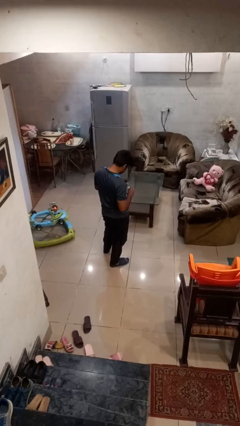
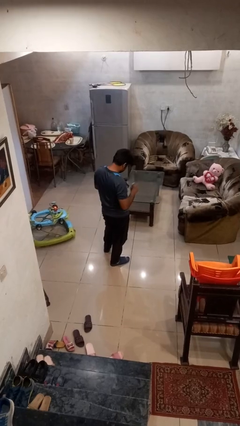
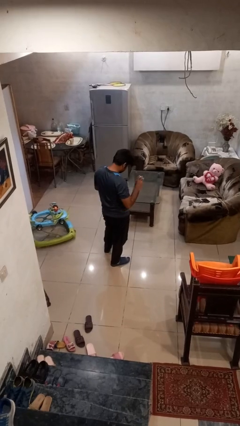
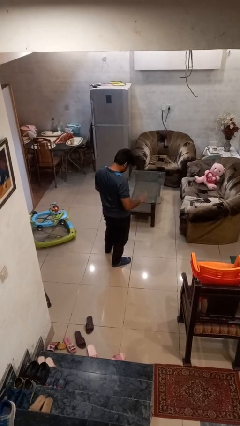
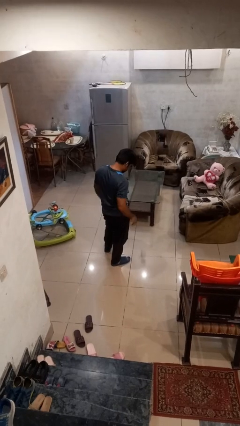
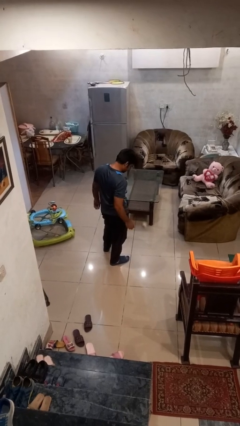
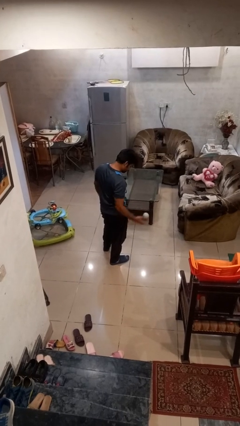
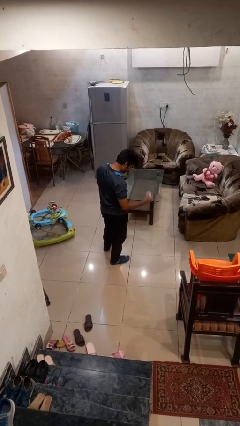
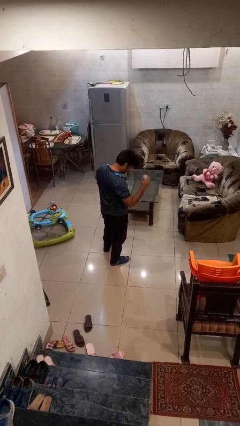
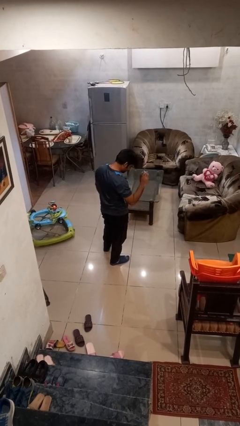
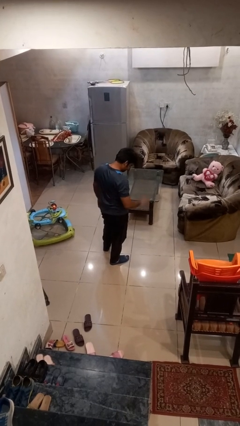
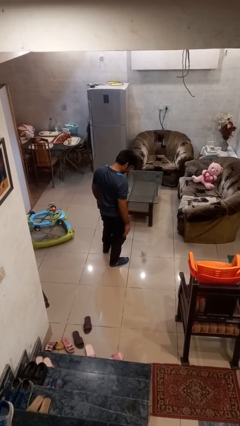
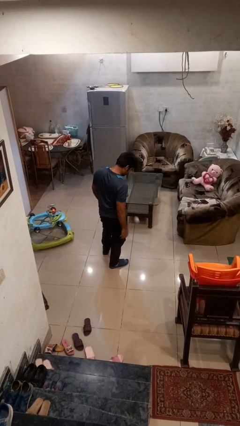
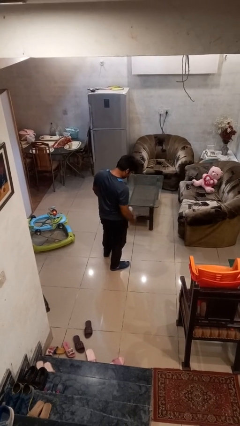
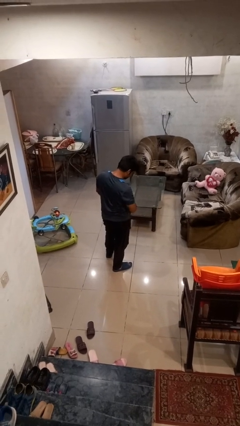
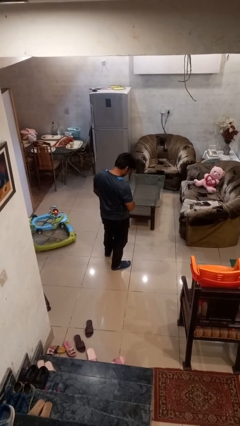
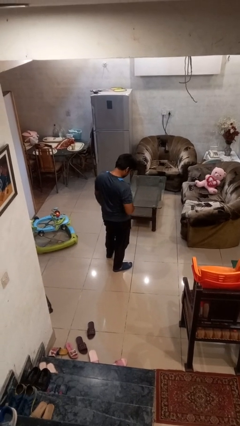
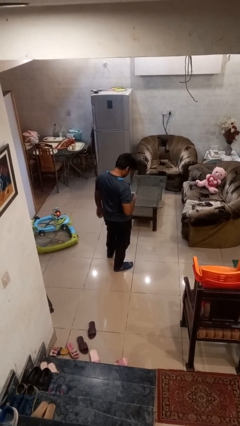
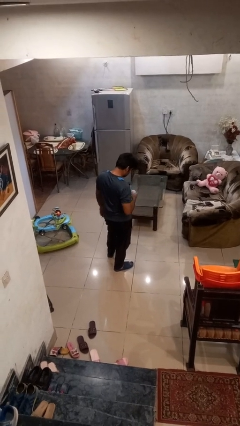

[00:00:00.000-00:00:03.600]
person bounces ball on floor

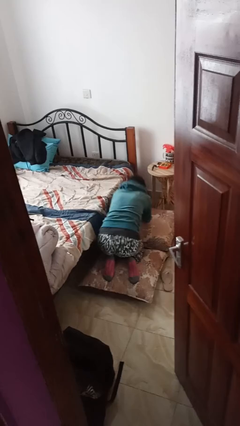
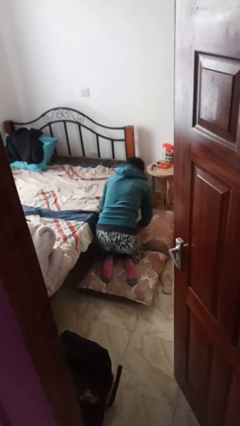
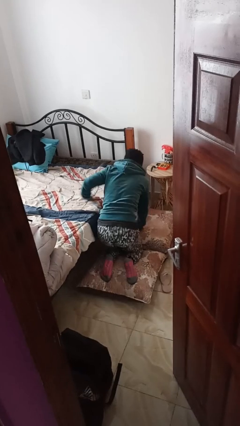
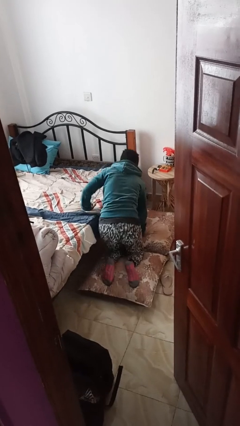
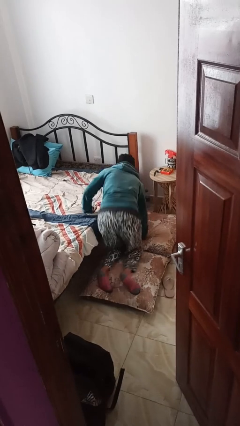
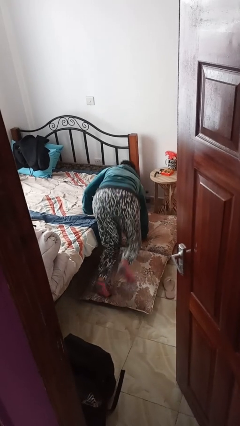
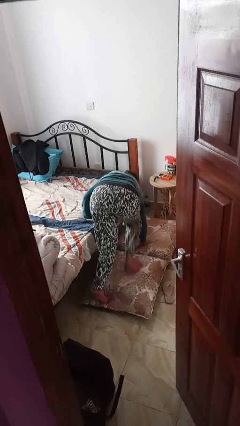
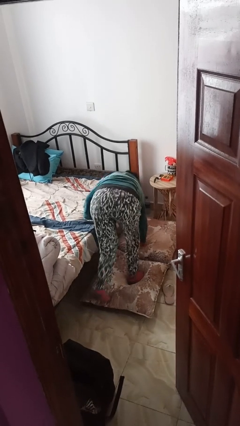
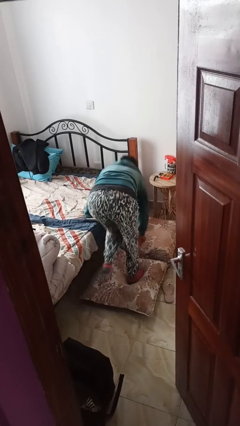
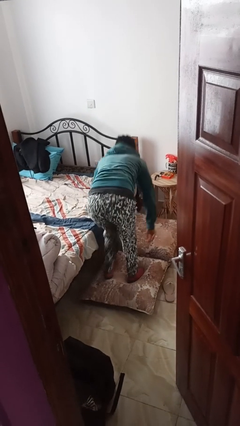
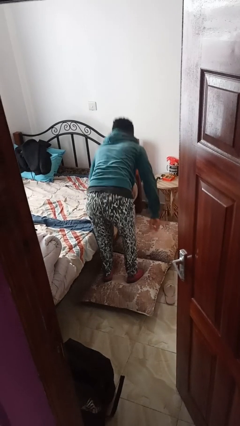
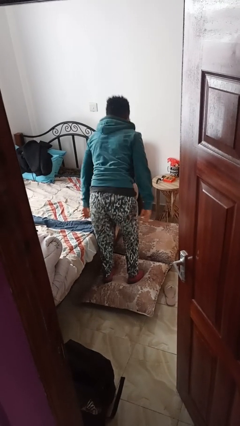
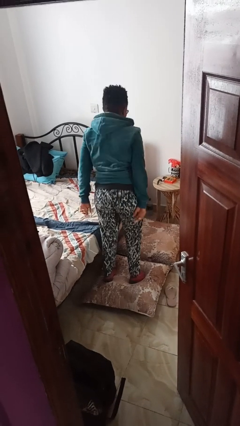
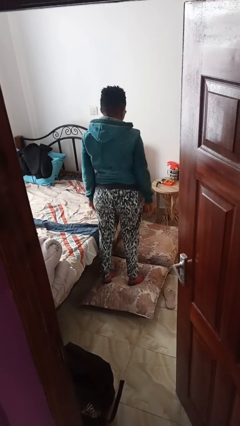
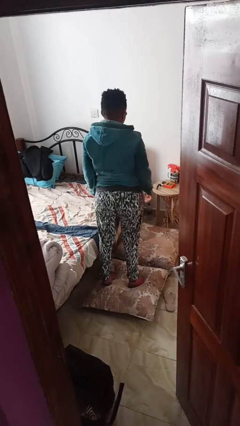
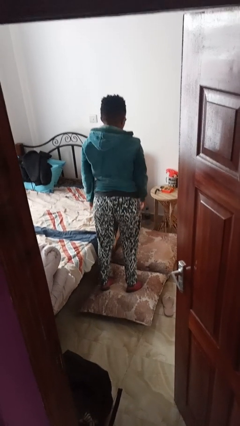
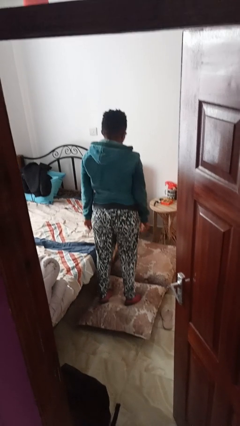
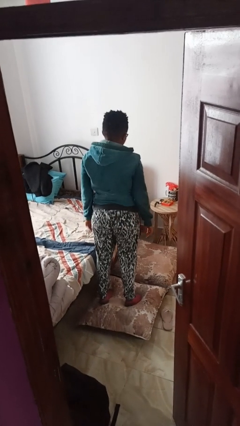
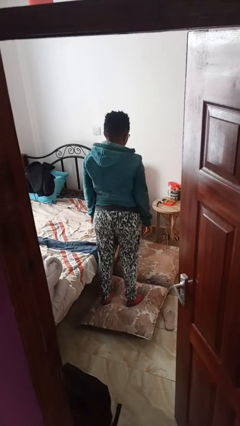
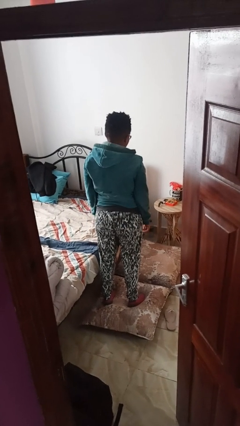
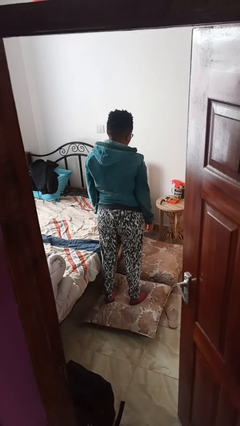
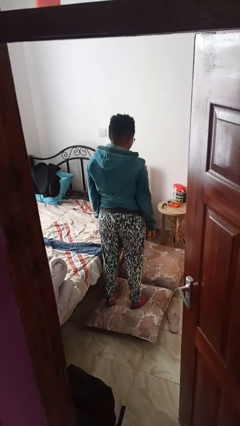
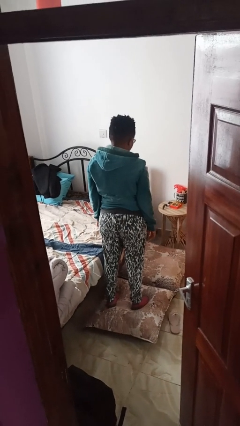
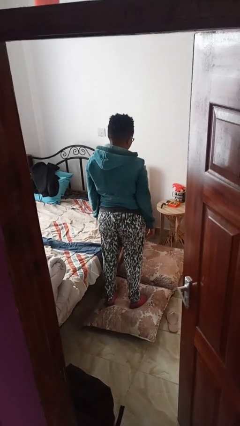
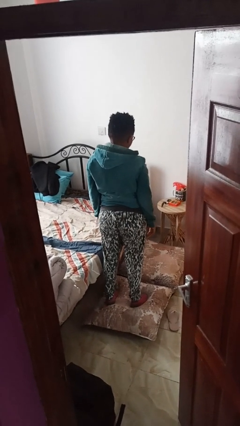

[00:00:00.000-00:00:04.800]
person stands up from floor

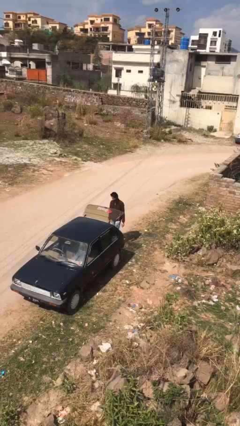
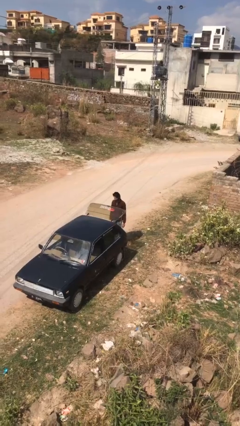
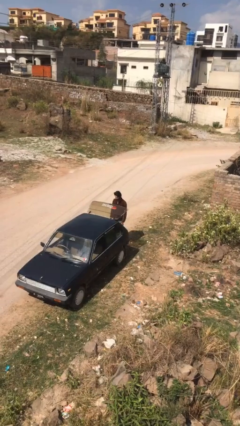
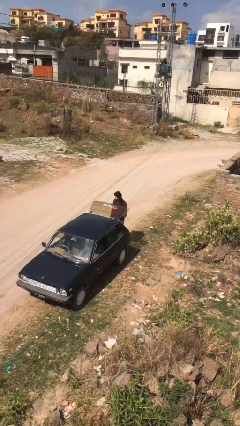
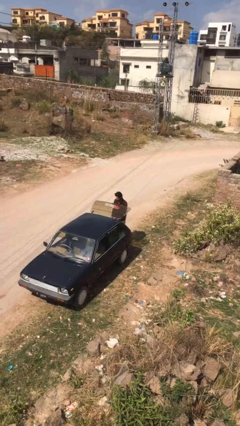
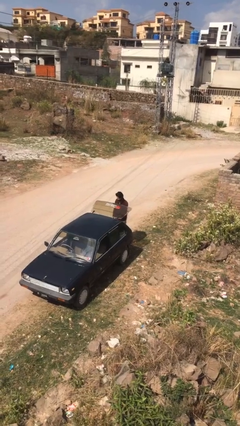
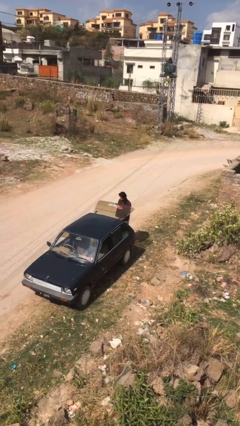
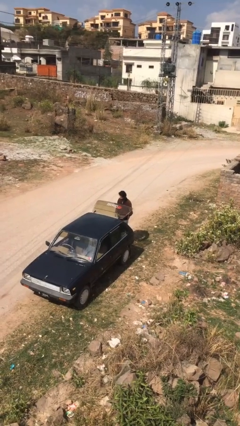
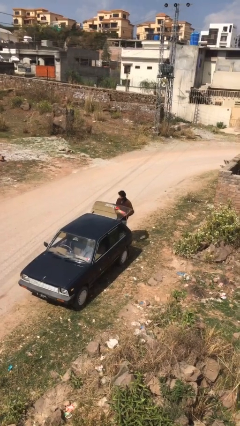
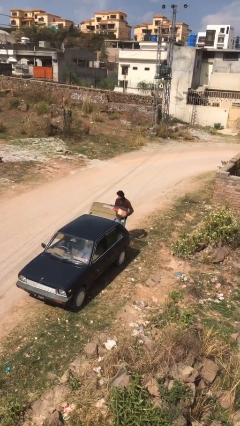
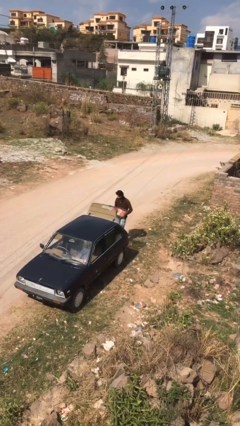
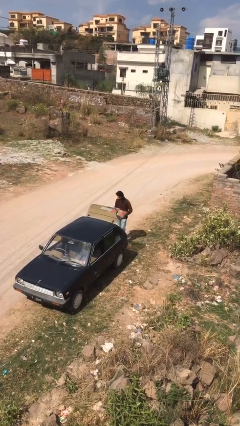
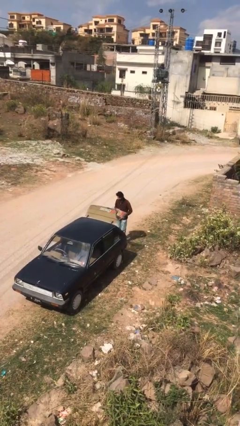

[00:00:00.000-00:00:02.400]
person unloads car

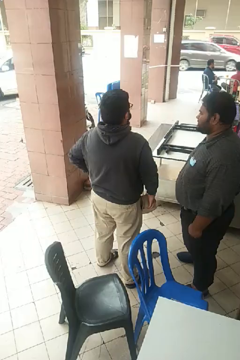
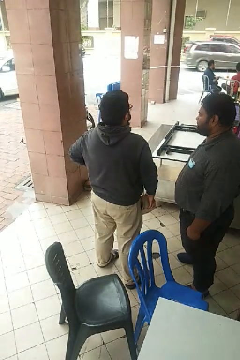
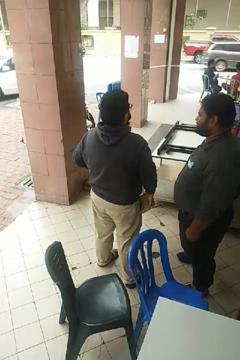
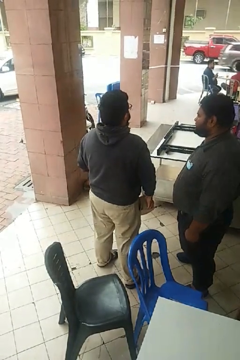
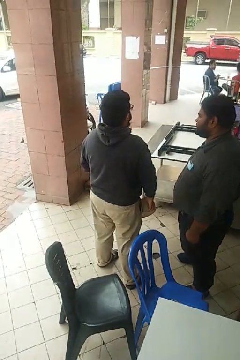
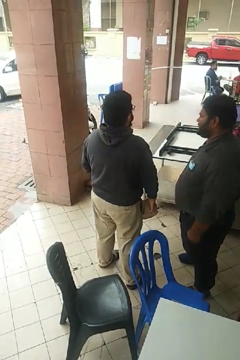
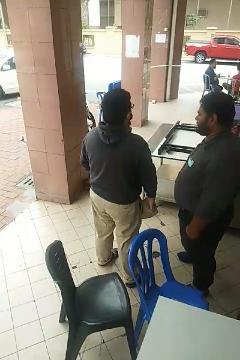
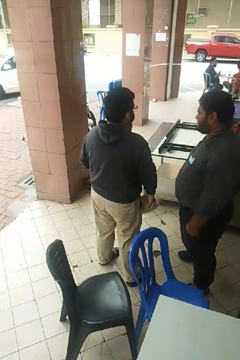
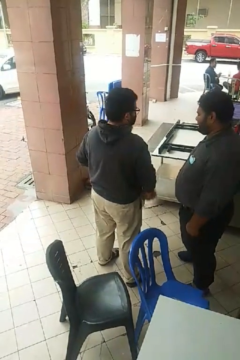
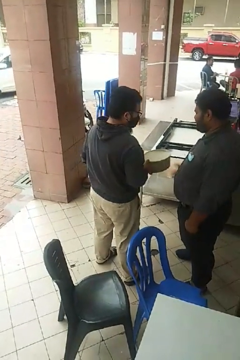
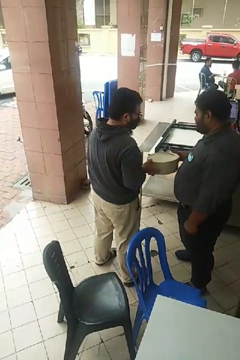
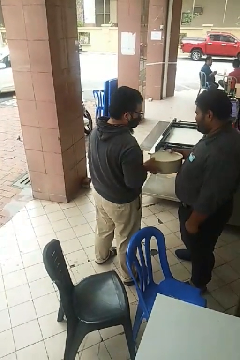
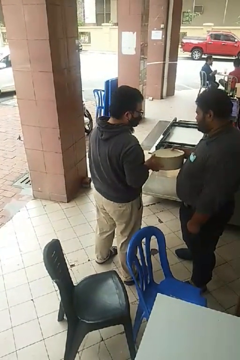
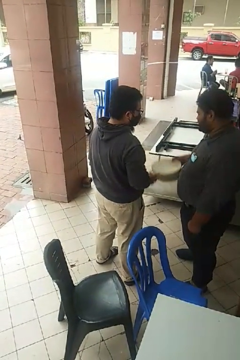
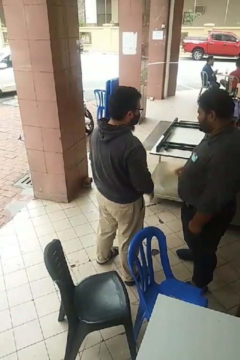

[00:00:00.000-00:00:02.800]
person transfers object to person

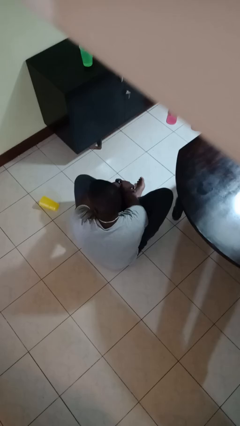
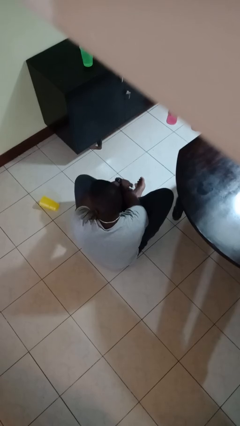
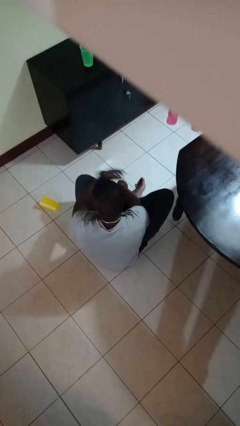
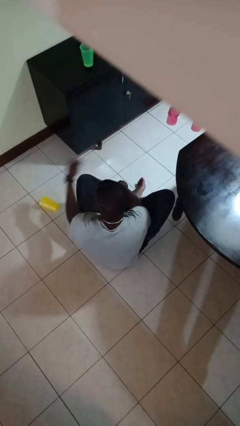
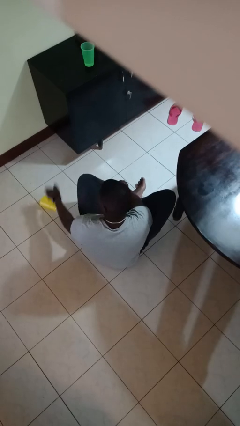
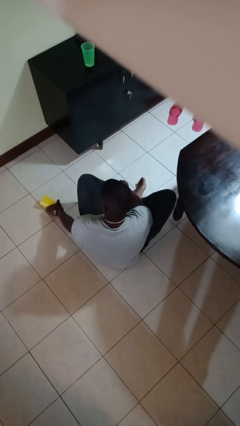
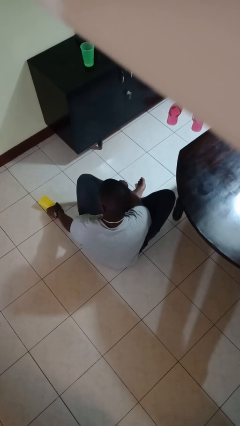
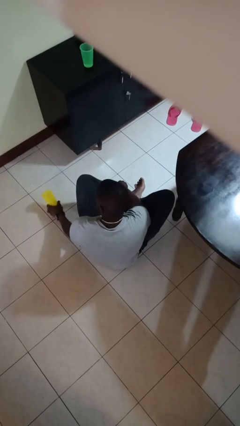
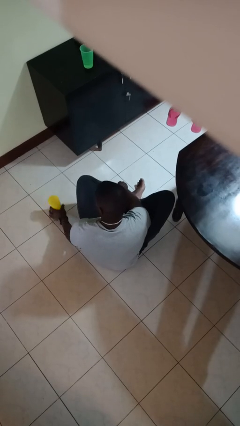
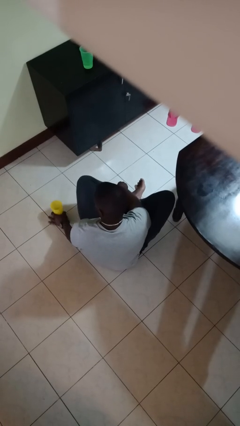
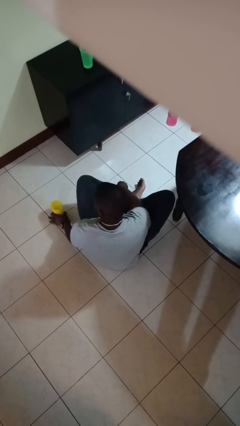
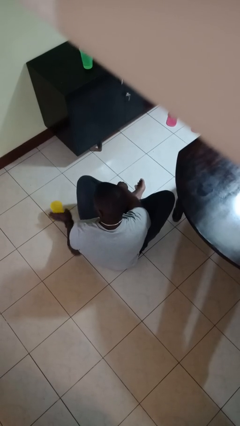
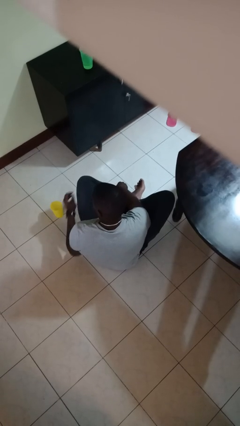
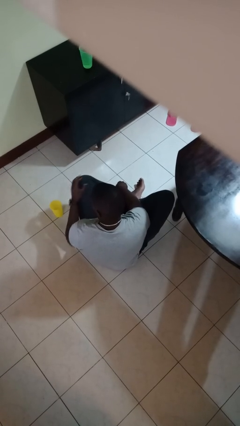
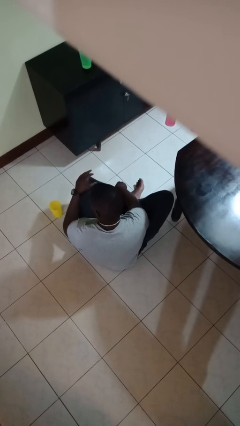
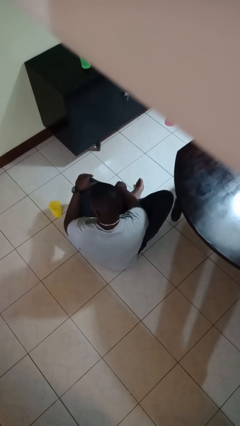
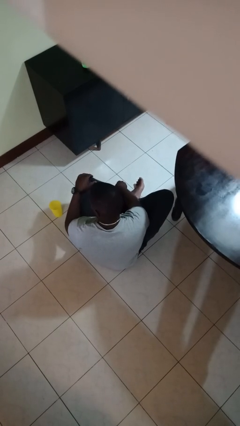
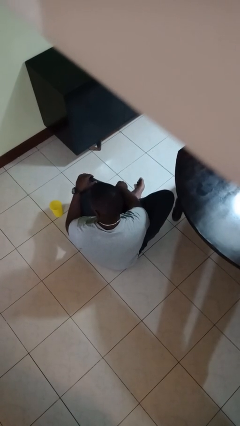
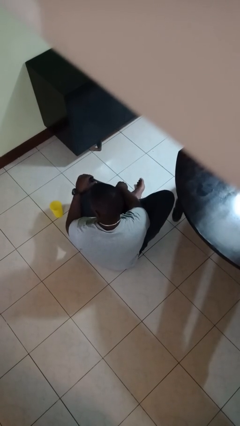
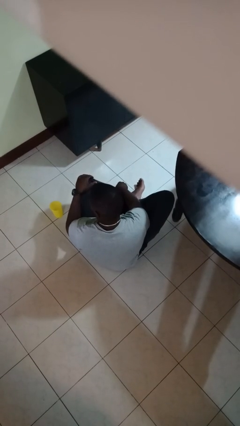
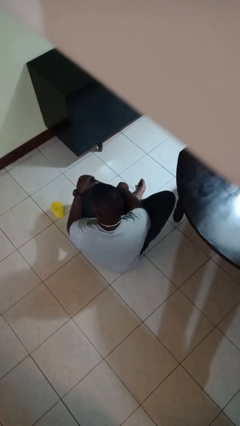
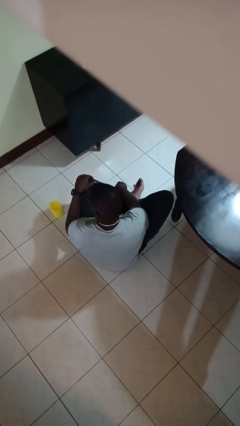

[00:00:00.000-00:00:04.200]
person sets upright glass

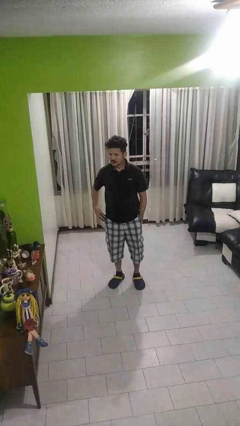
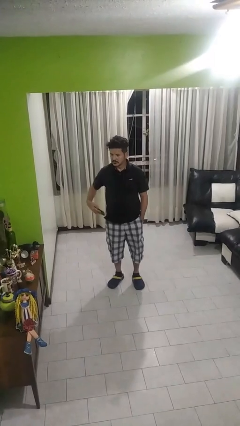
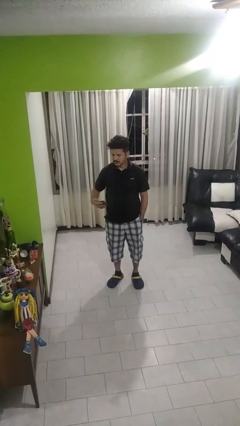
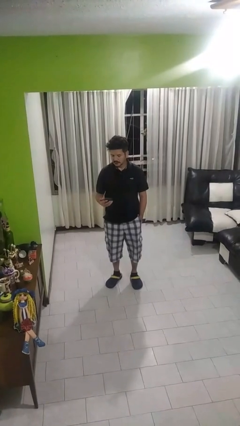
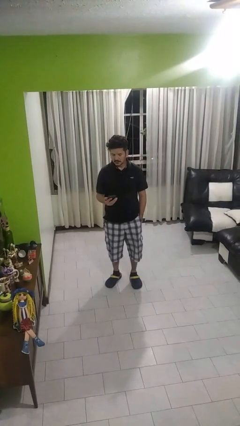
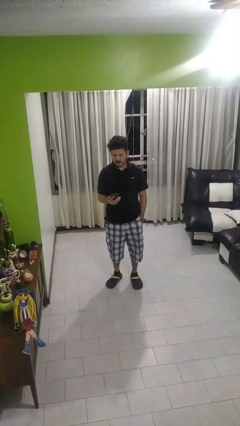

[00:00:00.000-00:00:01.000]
person takes phone from pocket
